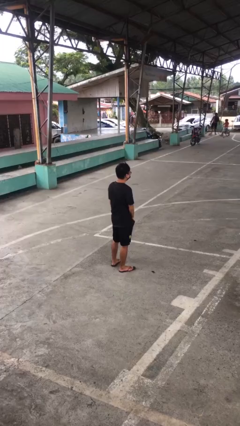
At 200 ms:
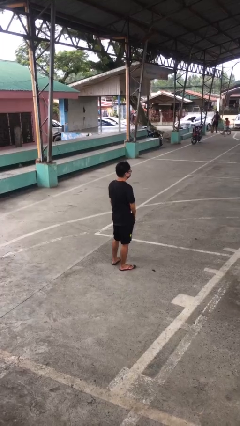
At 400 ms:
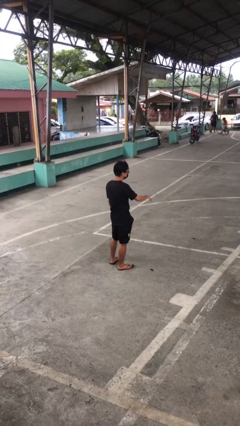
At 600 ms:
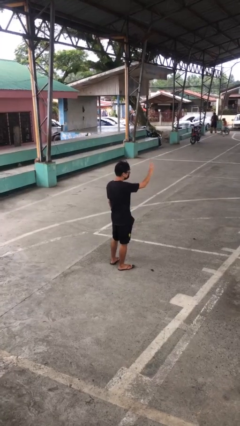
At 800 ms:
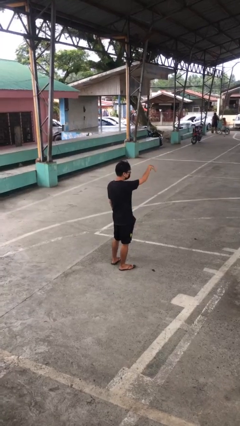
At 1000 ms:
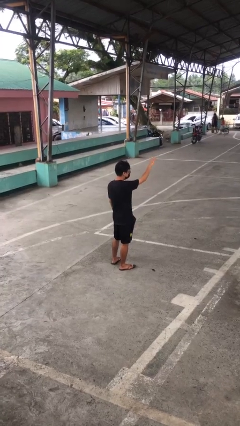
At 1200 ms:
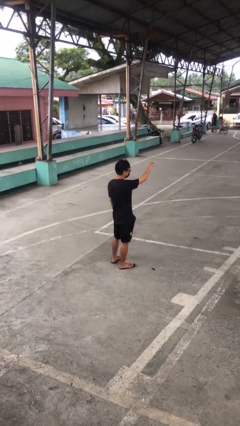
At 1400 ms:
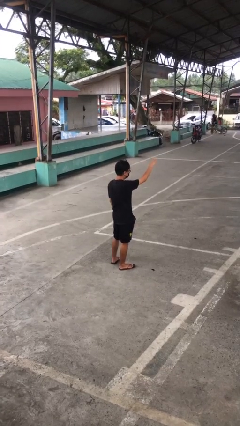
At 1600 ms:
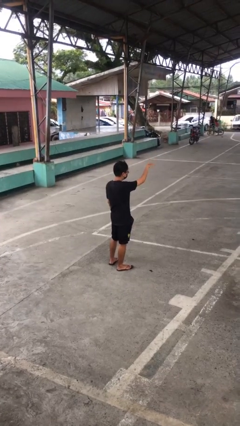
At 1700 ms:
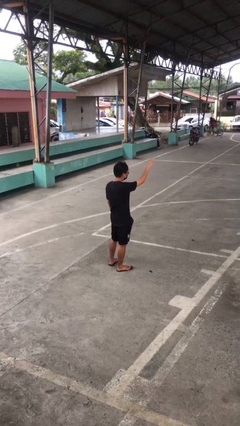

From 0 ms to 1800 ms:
person gestures come here

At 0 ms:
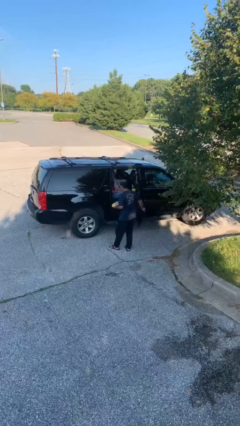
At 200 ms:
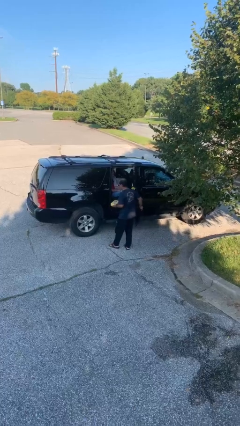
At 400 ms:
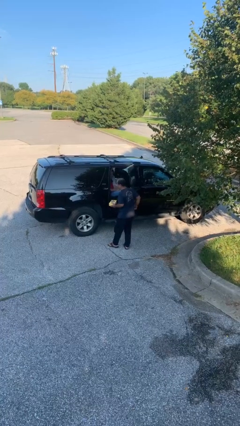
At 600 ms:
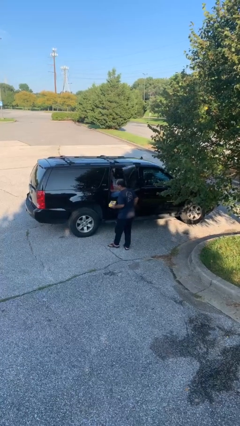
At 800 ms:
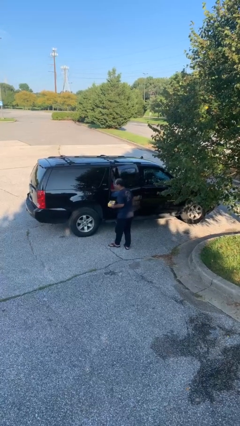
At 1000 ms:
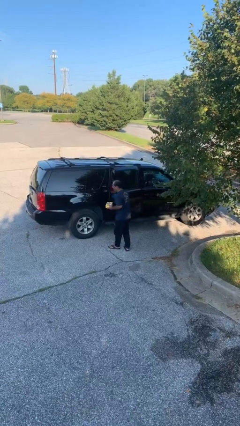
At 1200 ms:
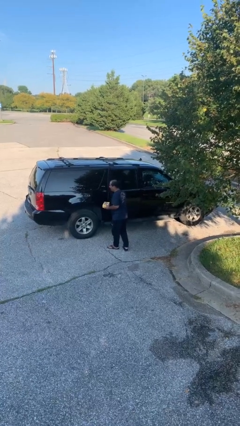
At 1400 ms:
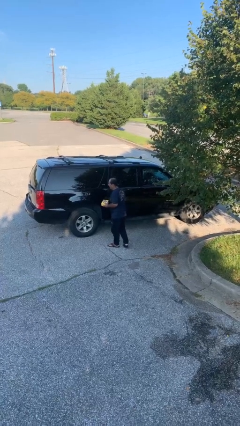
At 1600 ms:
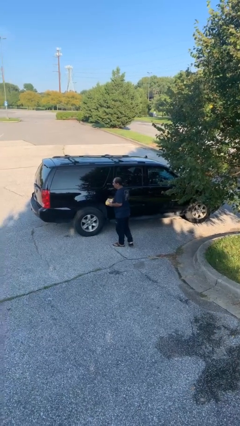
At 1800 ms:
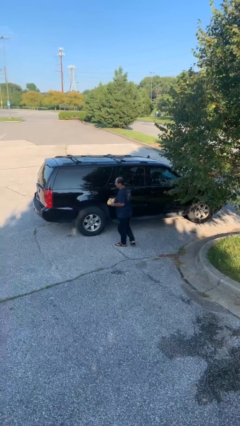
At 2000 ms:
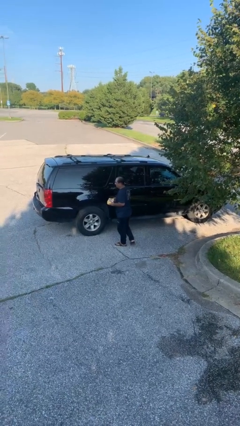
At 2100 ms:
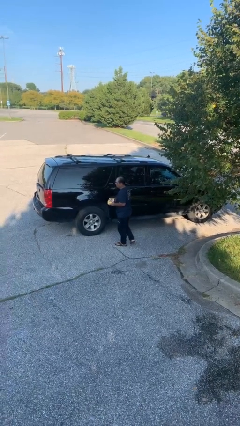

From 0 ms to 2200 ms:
person closes car door

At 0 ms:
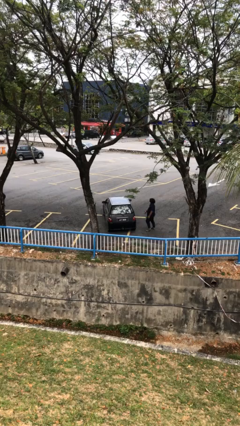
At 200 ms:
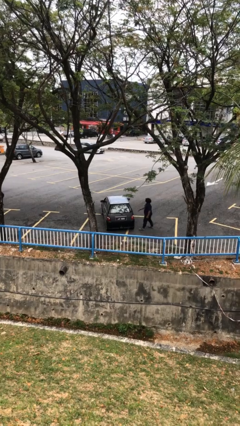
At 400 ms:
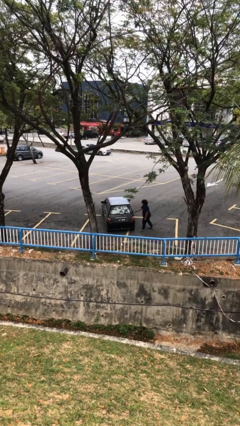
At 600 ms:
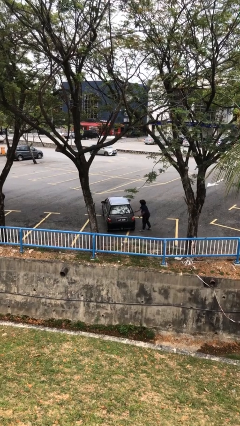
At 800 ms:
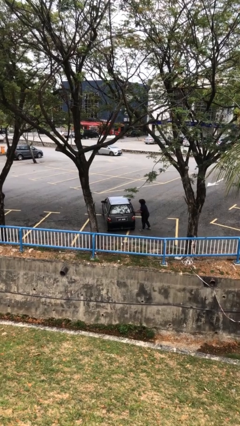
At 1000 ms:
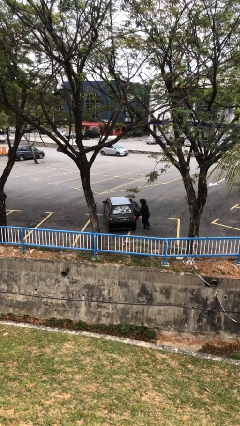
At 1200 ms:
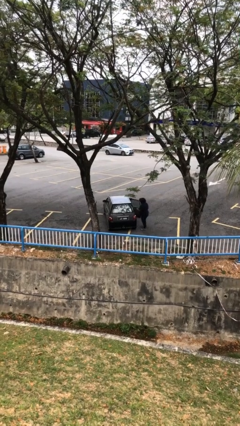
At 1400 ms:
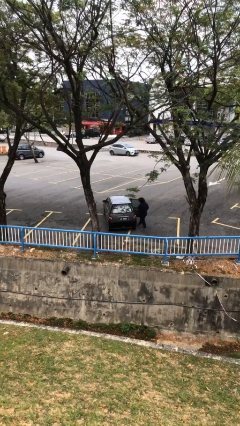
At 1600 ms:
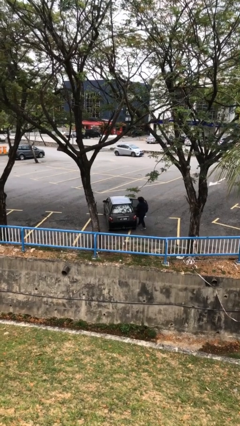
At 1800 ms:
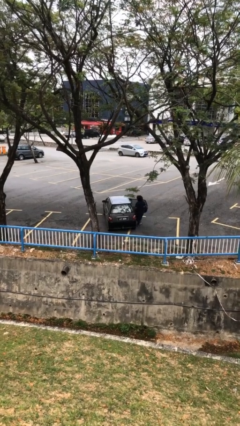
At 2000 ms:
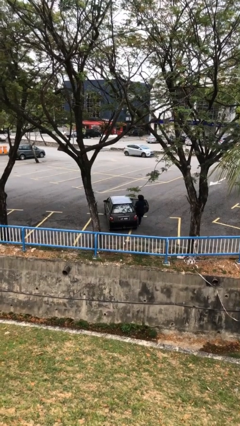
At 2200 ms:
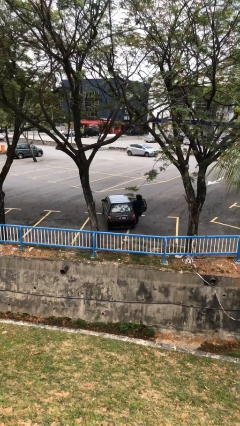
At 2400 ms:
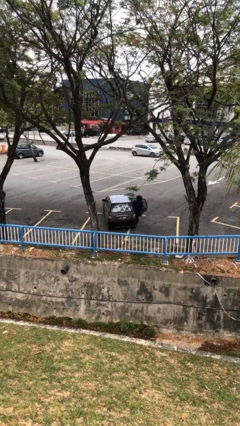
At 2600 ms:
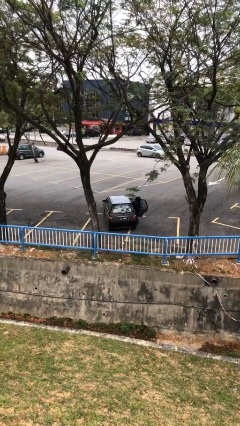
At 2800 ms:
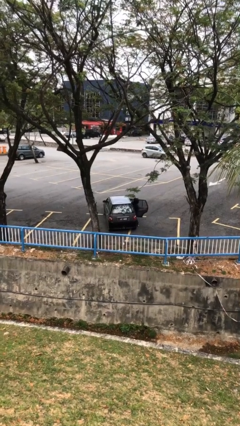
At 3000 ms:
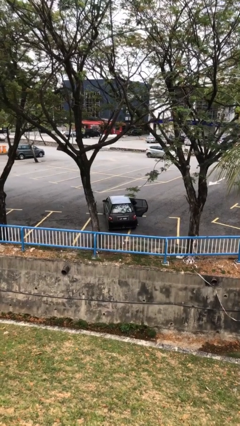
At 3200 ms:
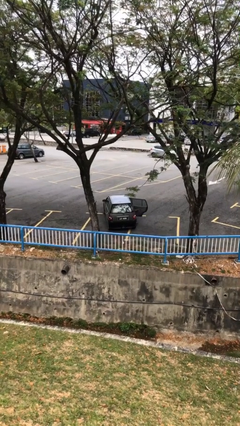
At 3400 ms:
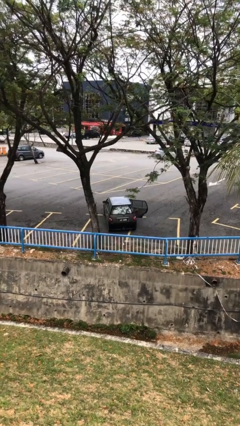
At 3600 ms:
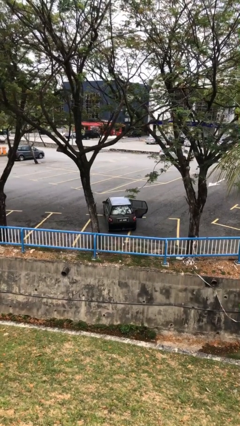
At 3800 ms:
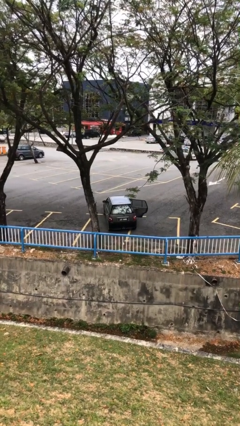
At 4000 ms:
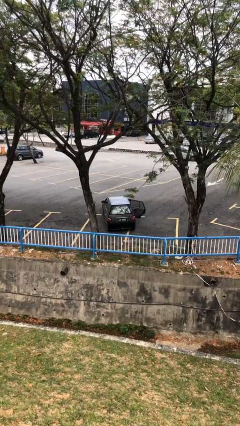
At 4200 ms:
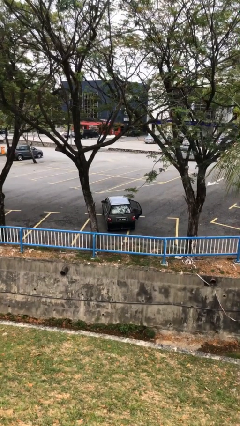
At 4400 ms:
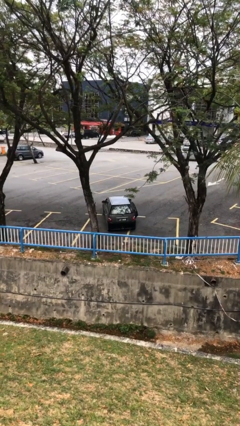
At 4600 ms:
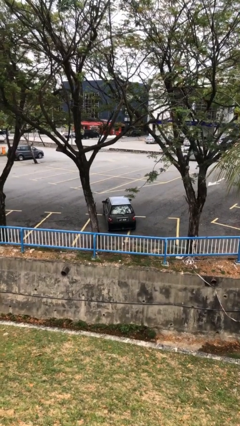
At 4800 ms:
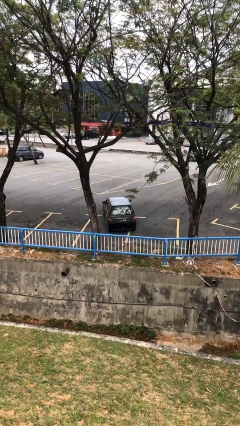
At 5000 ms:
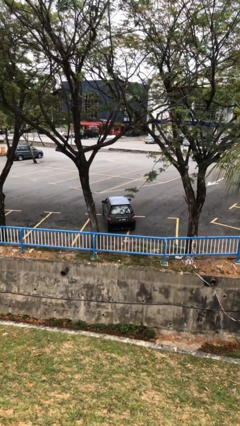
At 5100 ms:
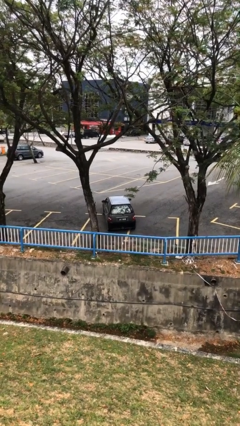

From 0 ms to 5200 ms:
car picks up person

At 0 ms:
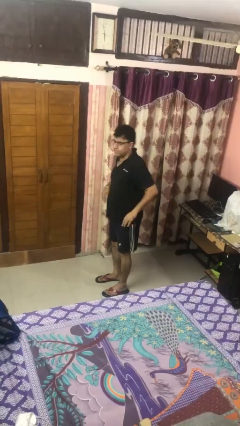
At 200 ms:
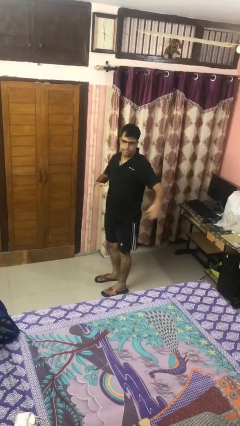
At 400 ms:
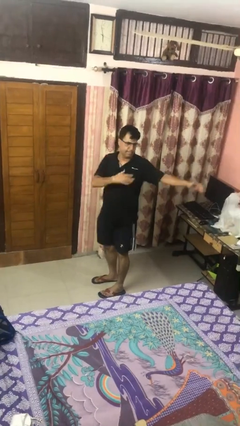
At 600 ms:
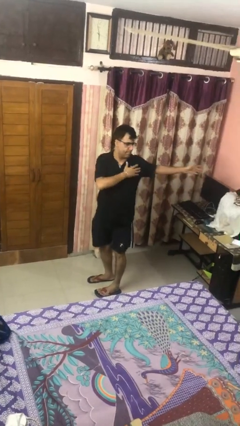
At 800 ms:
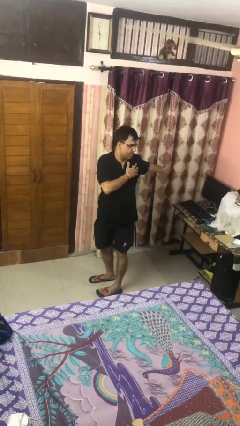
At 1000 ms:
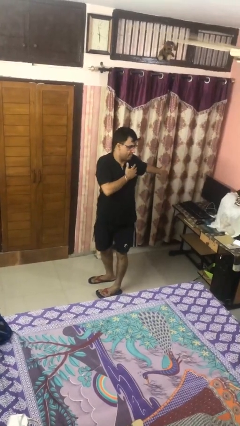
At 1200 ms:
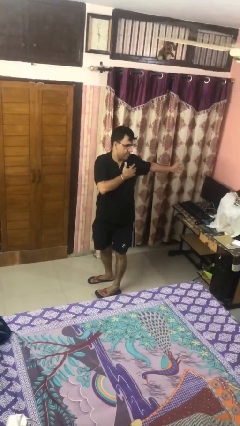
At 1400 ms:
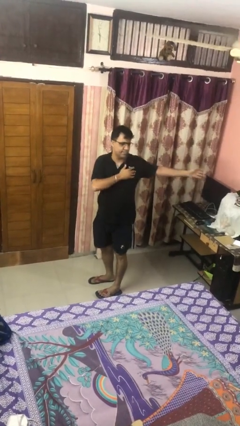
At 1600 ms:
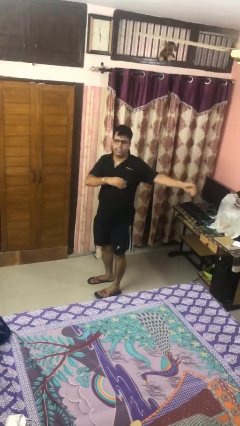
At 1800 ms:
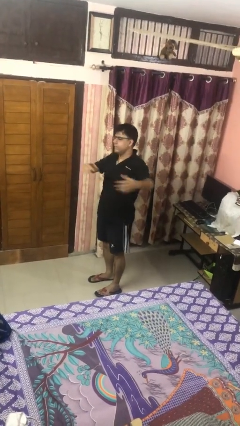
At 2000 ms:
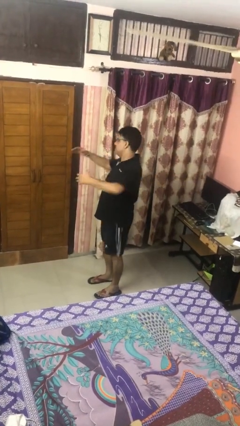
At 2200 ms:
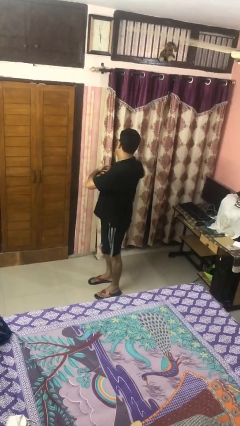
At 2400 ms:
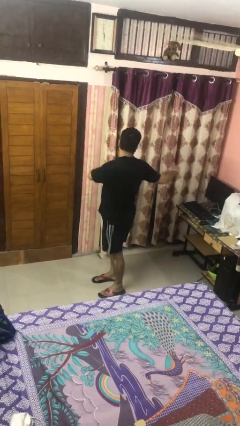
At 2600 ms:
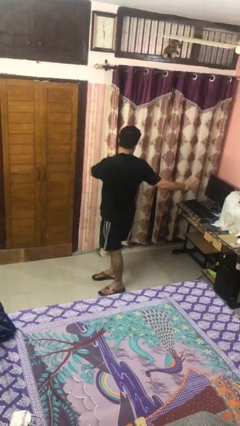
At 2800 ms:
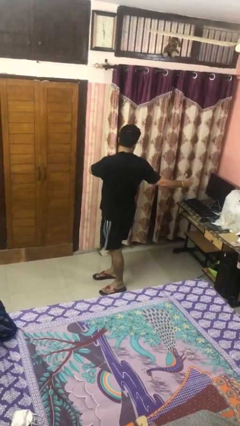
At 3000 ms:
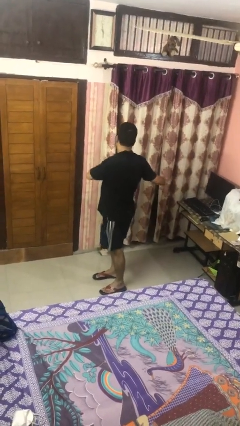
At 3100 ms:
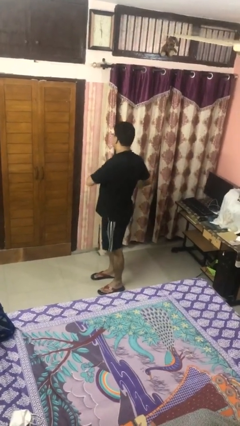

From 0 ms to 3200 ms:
person stretches arms to side

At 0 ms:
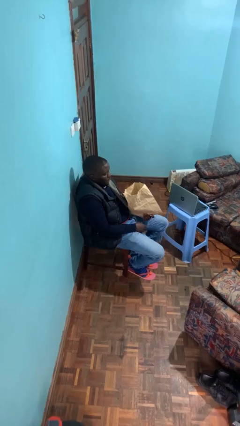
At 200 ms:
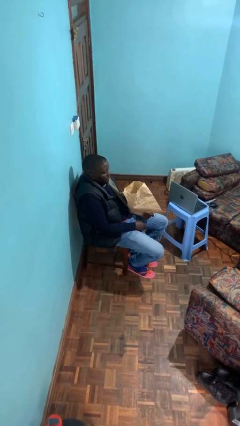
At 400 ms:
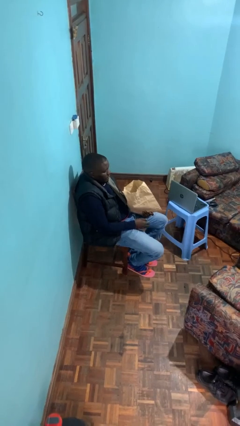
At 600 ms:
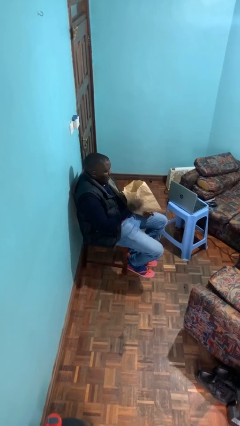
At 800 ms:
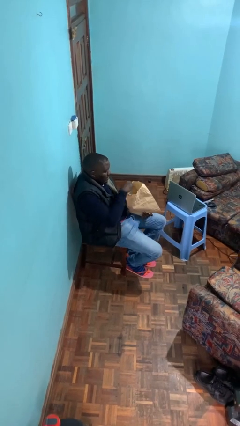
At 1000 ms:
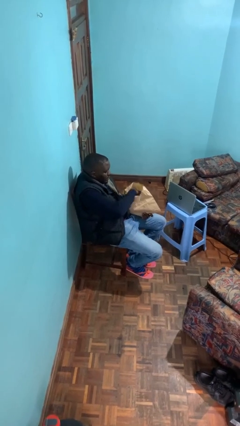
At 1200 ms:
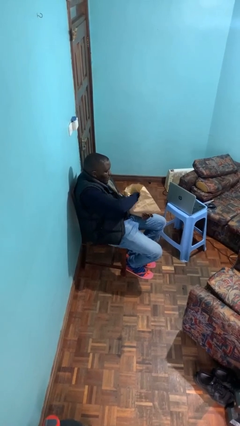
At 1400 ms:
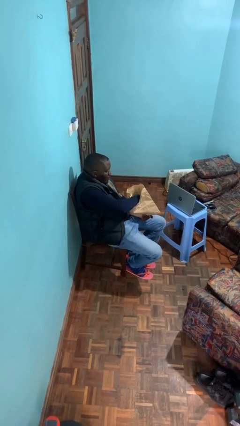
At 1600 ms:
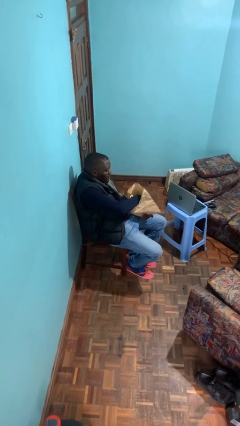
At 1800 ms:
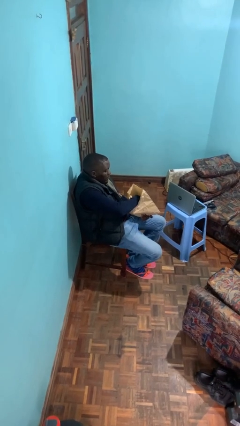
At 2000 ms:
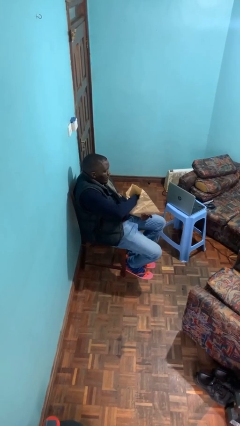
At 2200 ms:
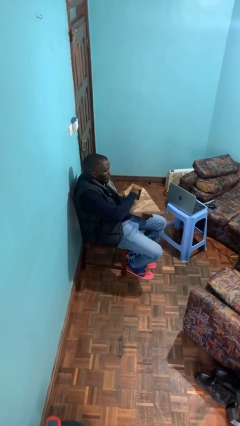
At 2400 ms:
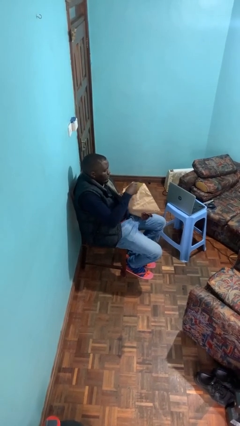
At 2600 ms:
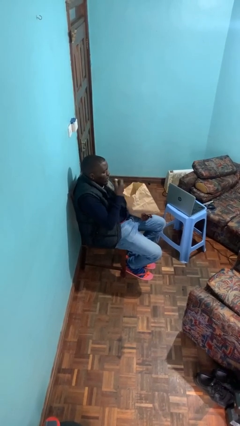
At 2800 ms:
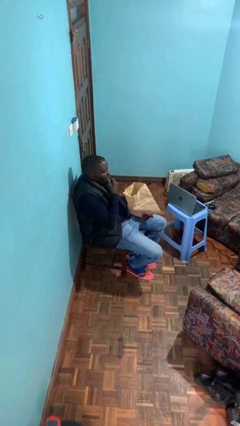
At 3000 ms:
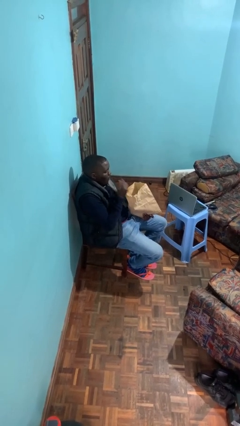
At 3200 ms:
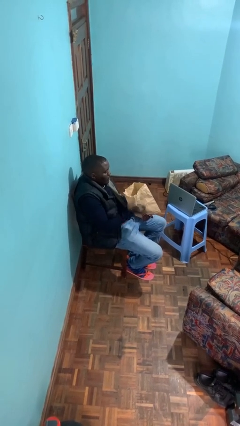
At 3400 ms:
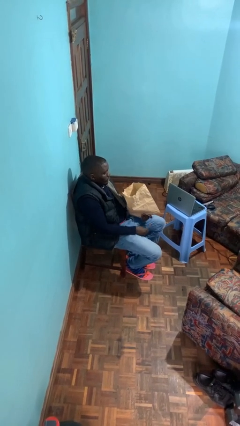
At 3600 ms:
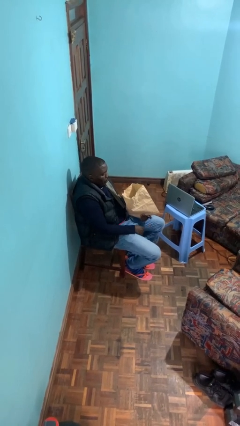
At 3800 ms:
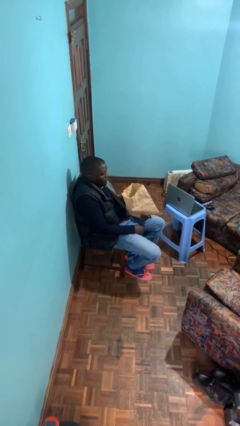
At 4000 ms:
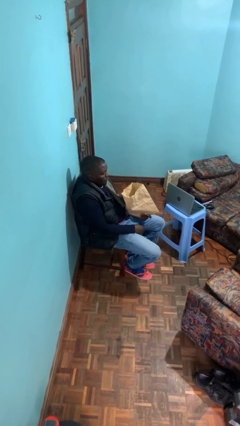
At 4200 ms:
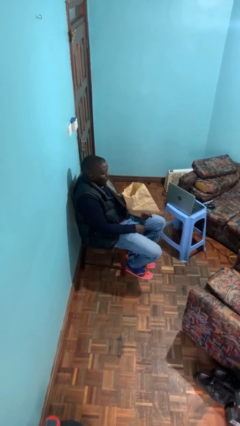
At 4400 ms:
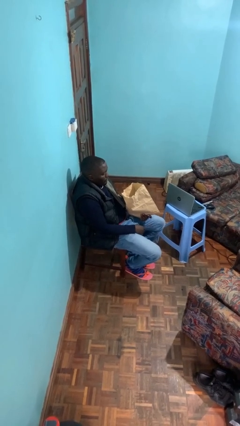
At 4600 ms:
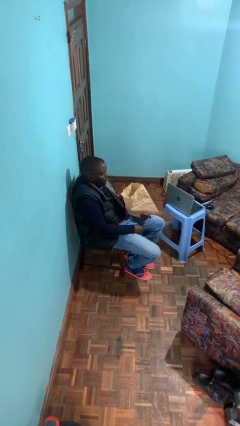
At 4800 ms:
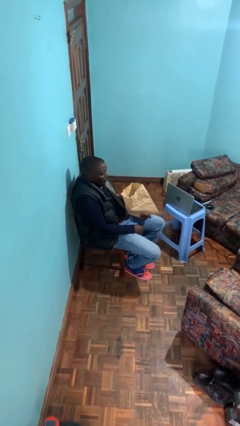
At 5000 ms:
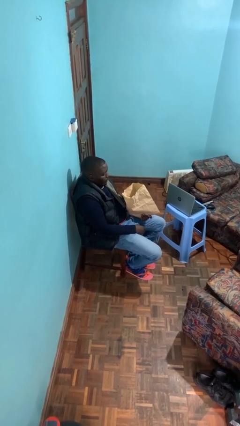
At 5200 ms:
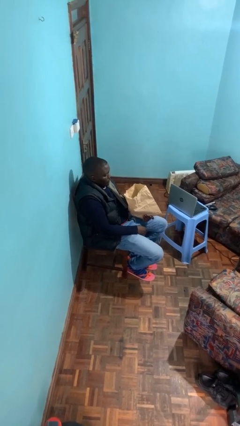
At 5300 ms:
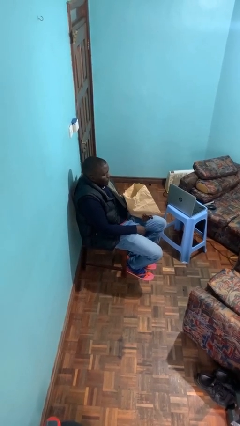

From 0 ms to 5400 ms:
person eats snack from bag
